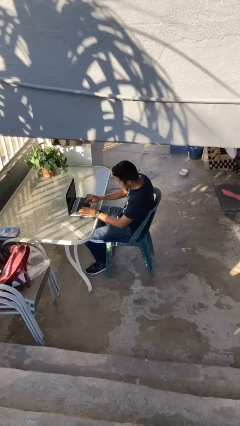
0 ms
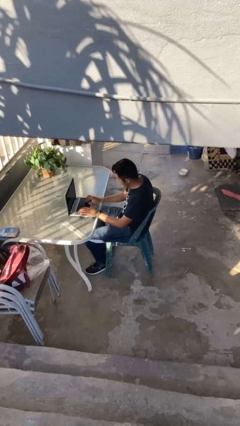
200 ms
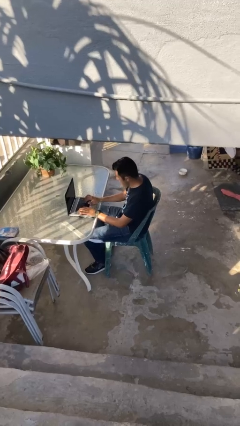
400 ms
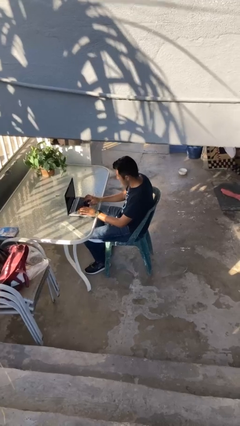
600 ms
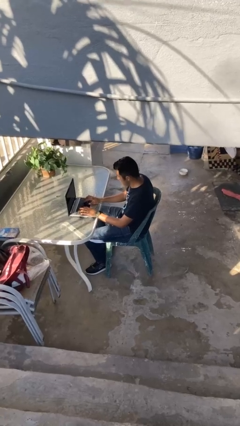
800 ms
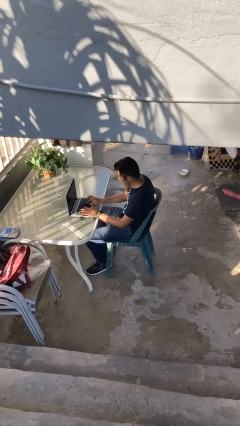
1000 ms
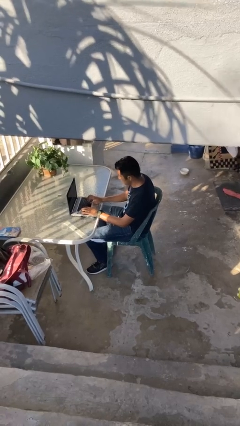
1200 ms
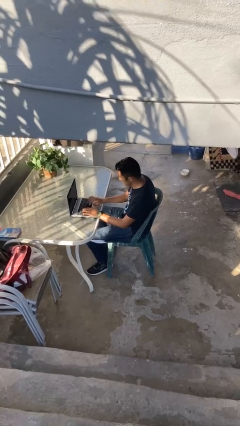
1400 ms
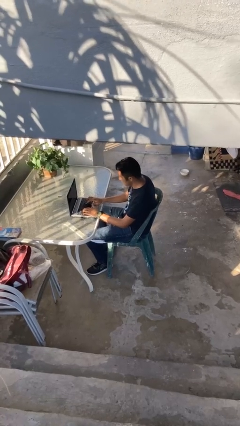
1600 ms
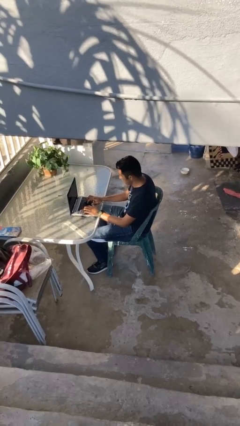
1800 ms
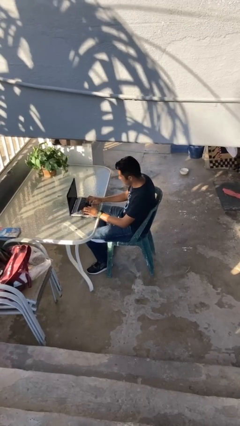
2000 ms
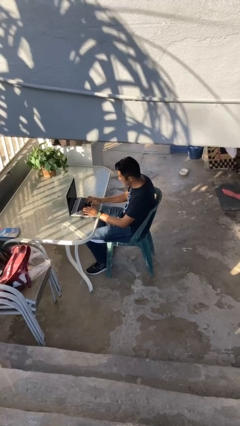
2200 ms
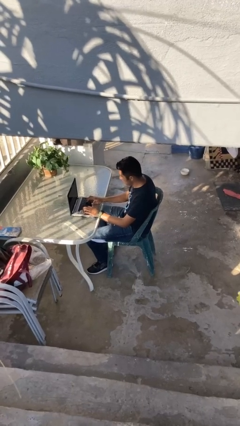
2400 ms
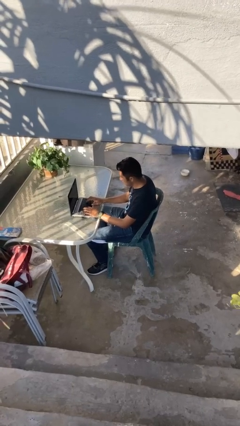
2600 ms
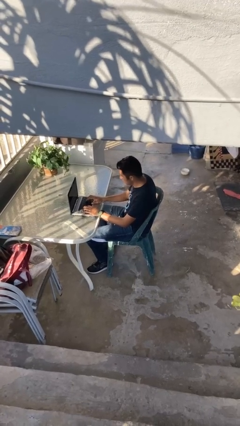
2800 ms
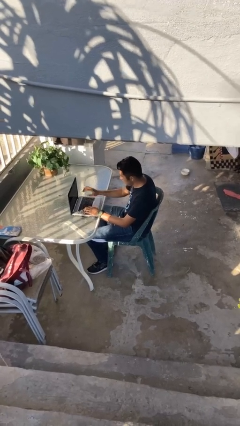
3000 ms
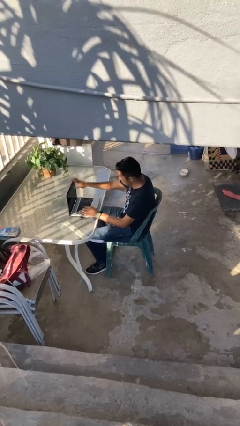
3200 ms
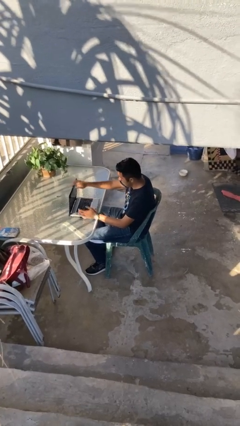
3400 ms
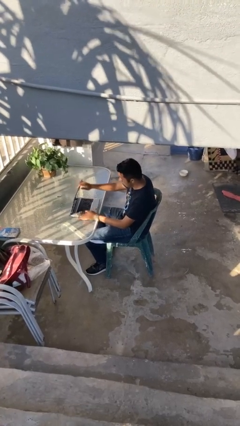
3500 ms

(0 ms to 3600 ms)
person interacts with laptop

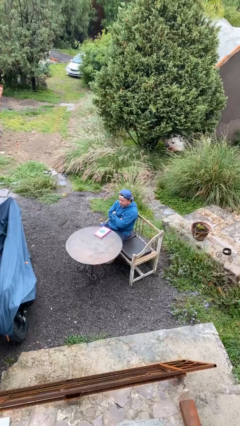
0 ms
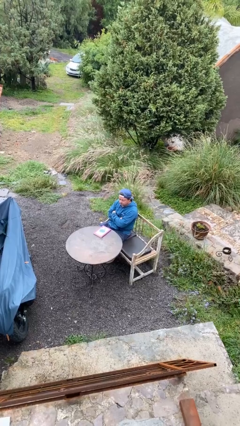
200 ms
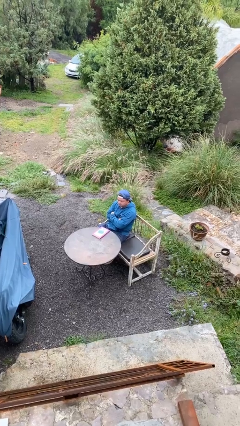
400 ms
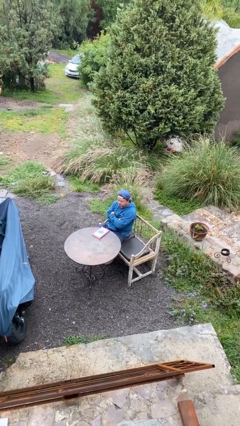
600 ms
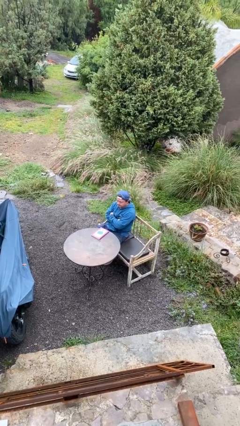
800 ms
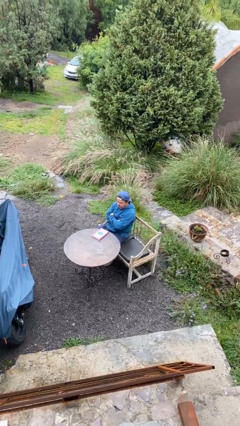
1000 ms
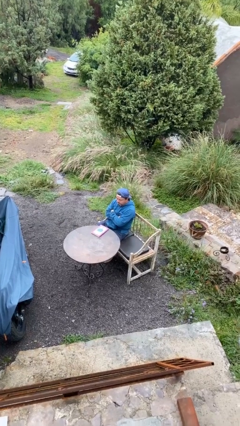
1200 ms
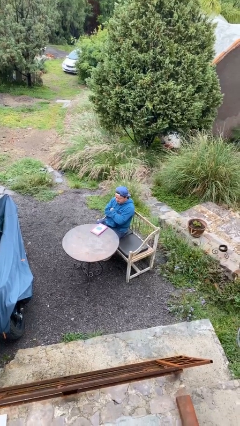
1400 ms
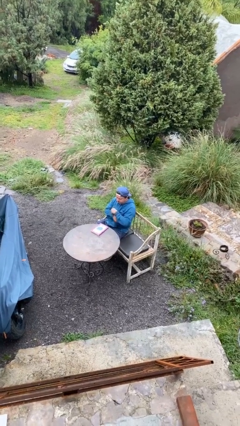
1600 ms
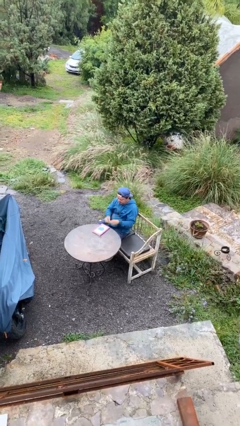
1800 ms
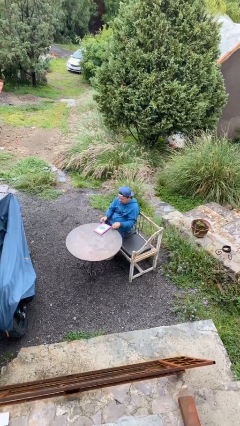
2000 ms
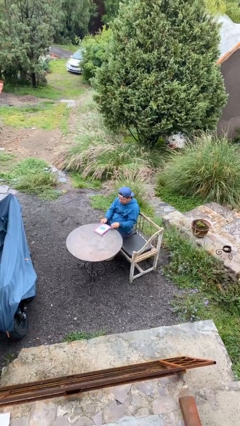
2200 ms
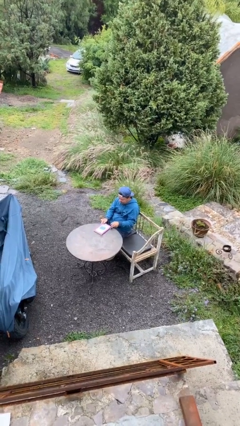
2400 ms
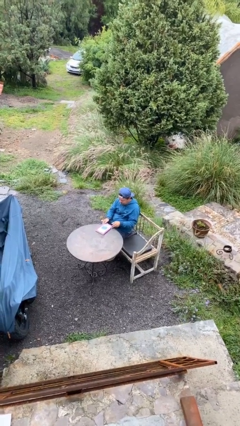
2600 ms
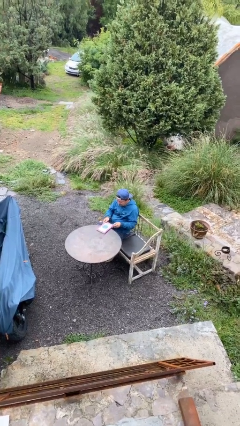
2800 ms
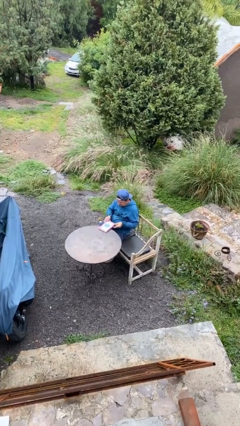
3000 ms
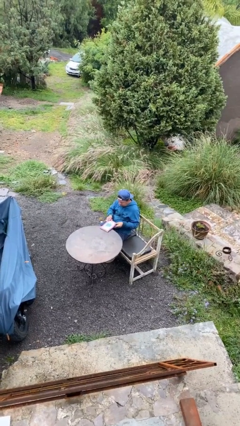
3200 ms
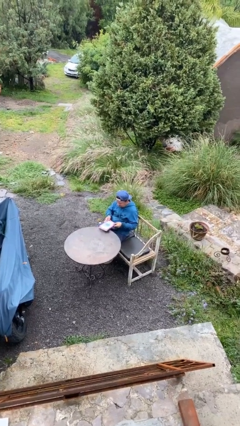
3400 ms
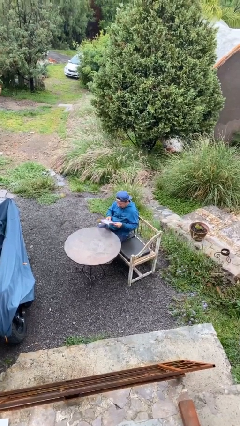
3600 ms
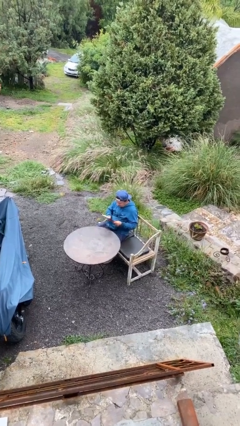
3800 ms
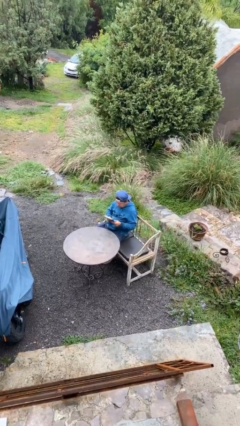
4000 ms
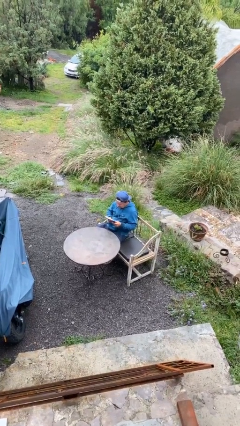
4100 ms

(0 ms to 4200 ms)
person picks up object from table

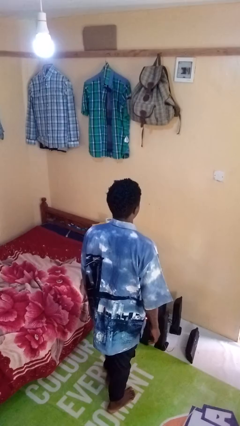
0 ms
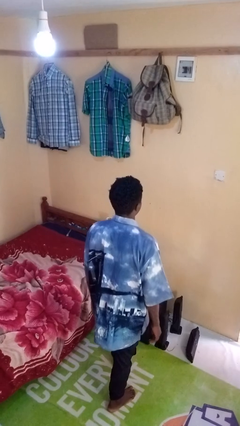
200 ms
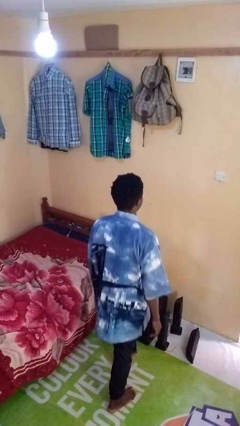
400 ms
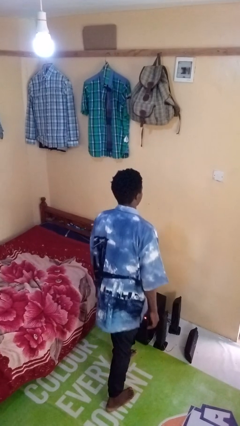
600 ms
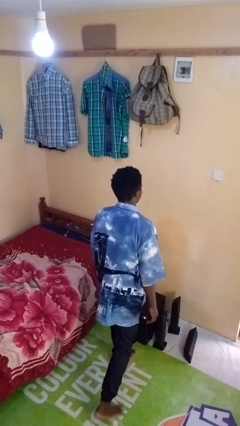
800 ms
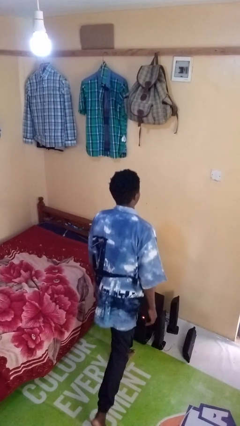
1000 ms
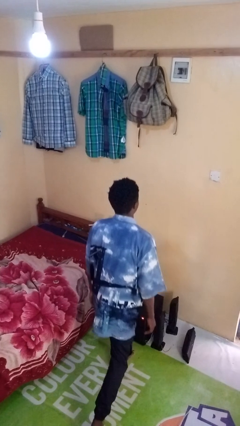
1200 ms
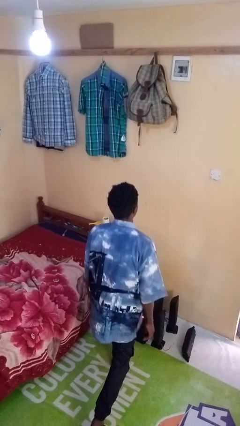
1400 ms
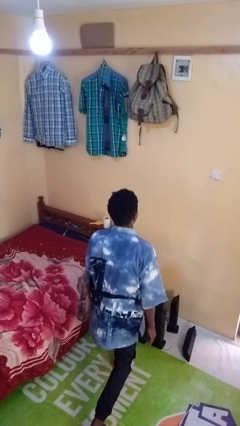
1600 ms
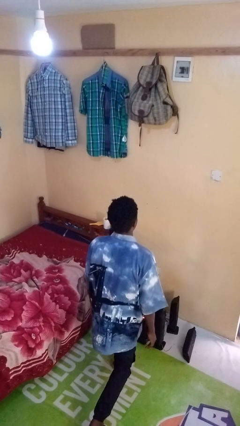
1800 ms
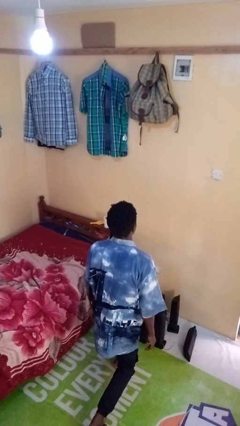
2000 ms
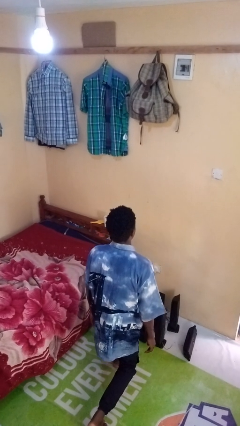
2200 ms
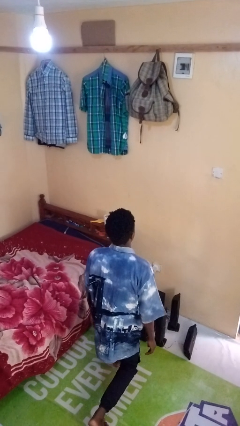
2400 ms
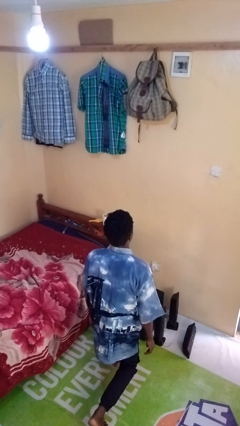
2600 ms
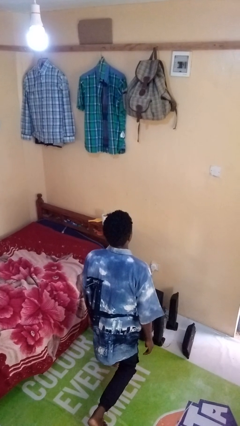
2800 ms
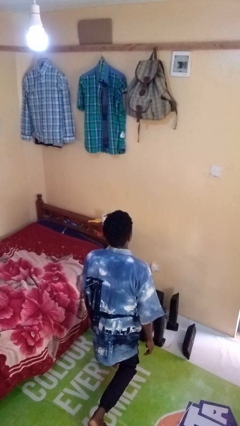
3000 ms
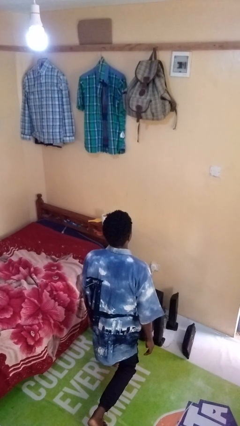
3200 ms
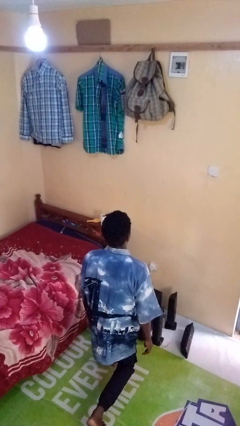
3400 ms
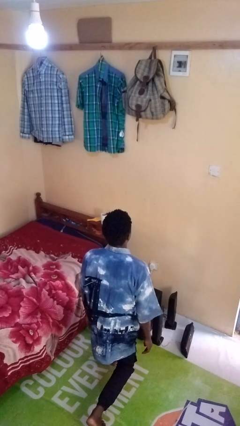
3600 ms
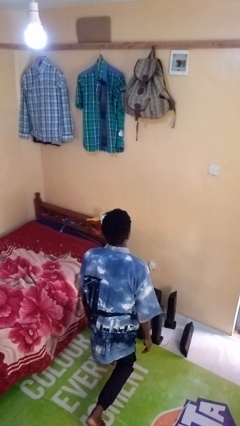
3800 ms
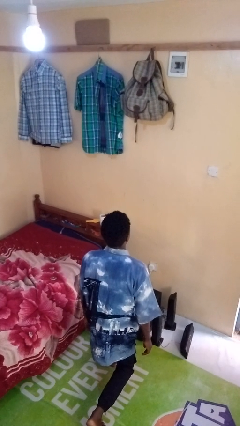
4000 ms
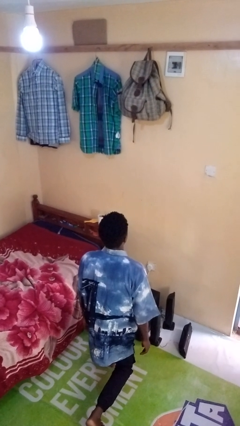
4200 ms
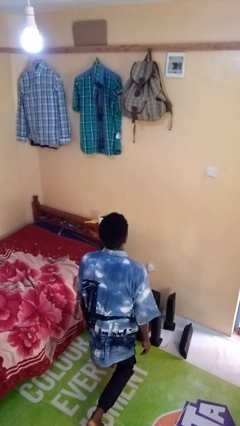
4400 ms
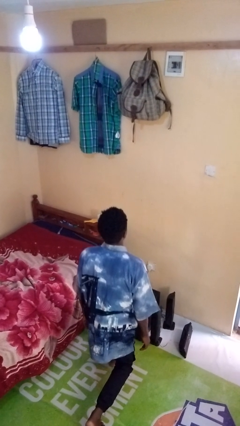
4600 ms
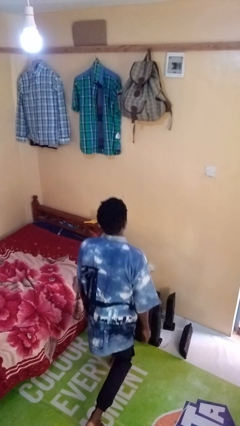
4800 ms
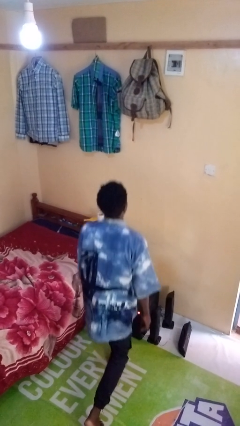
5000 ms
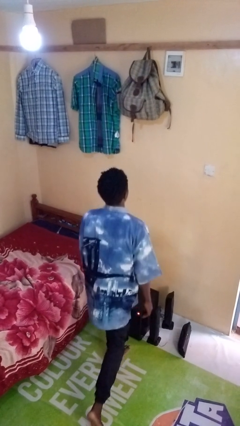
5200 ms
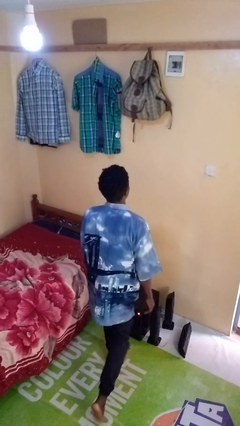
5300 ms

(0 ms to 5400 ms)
person exercises with lunges

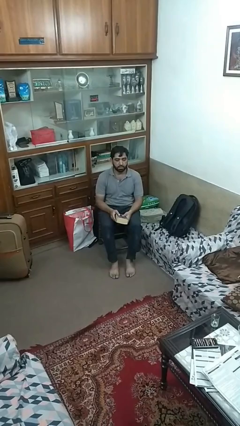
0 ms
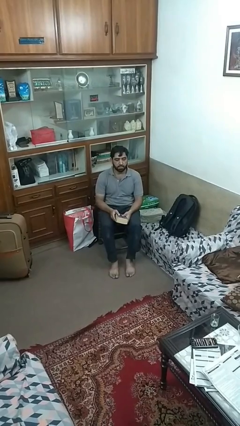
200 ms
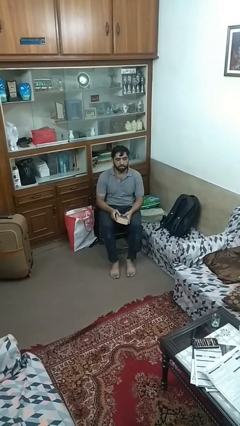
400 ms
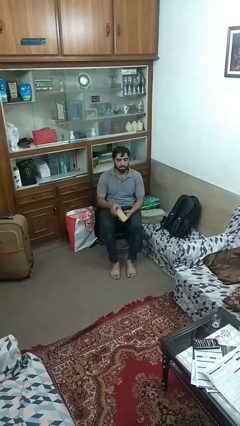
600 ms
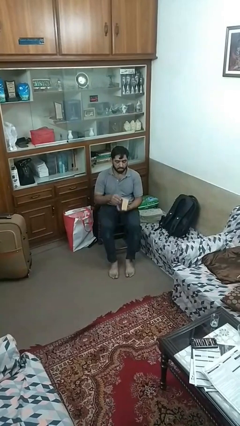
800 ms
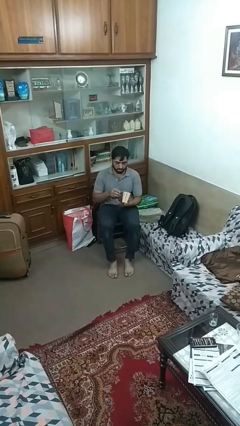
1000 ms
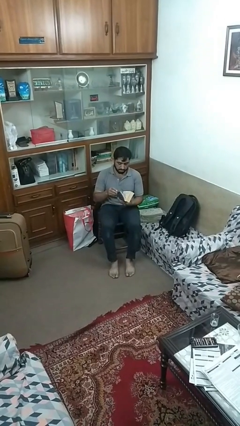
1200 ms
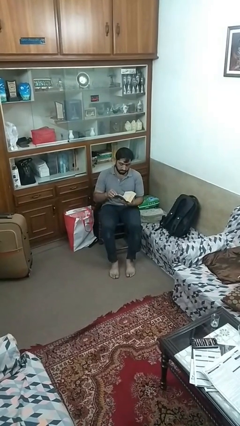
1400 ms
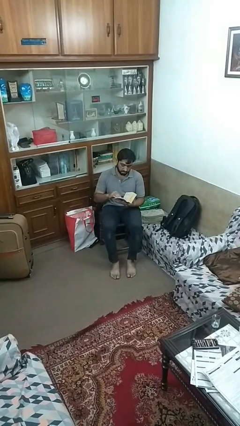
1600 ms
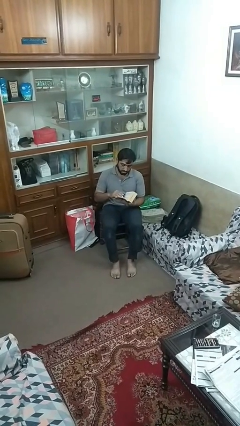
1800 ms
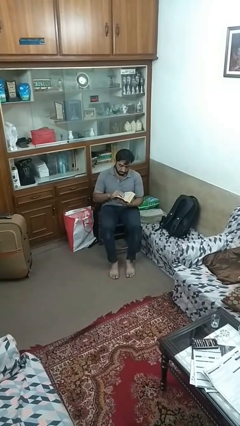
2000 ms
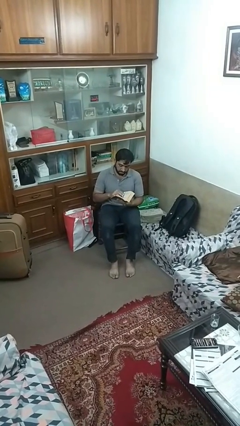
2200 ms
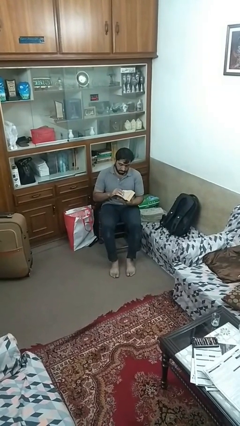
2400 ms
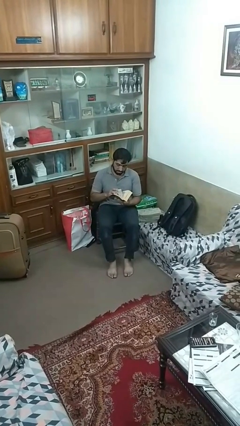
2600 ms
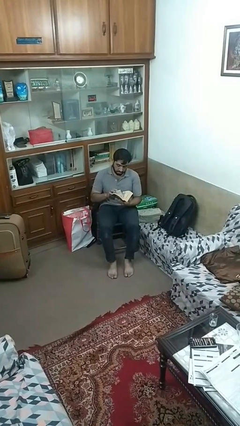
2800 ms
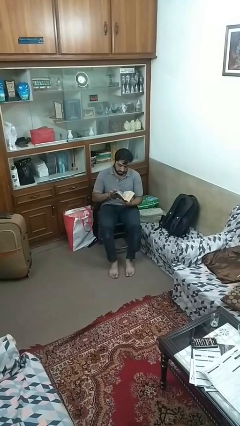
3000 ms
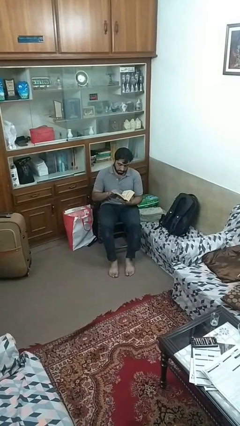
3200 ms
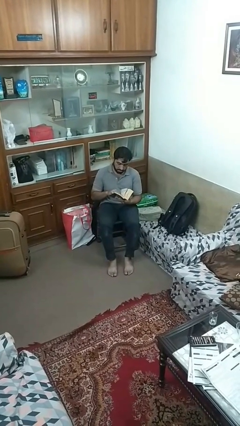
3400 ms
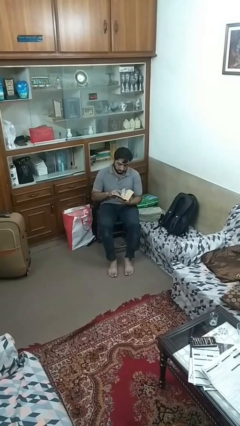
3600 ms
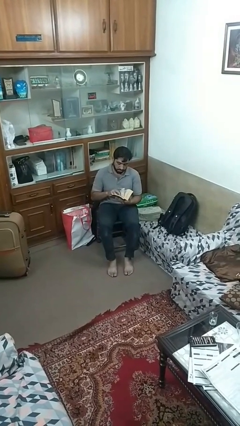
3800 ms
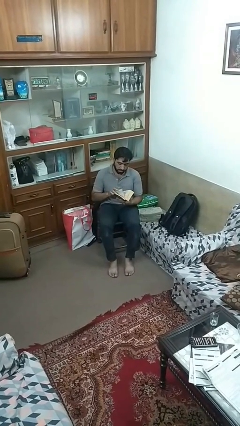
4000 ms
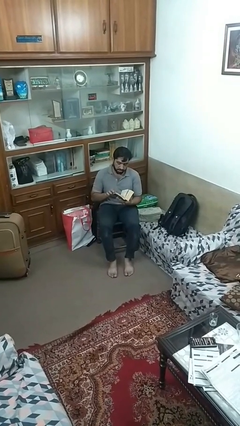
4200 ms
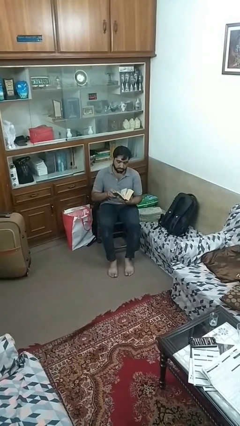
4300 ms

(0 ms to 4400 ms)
person reads book
